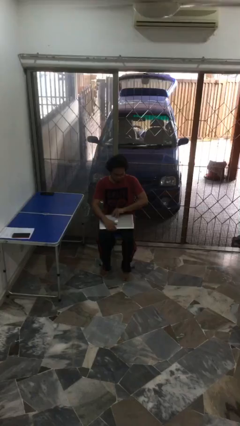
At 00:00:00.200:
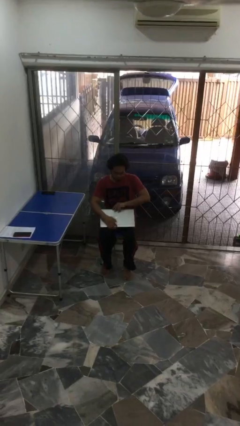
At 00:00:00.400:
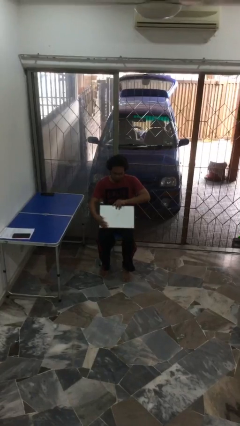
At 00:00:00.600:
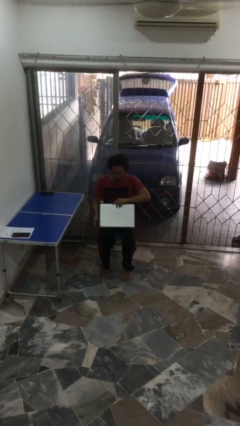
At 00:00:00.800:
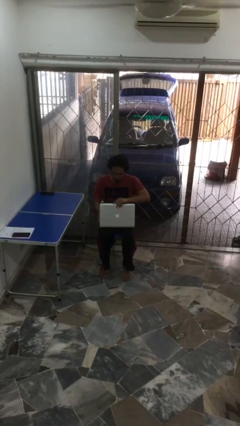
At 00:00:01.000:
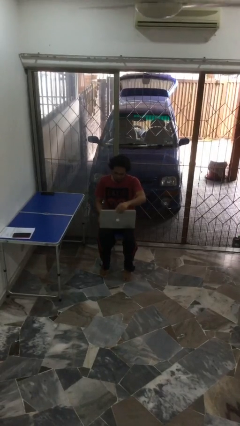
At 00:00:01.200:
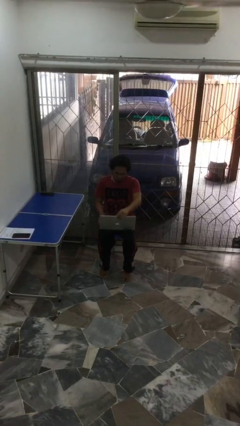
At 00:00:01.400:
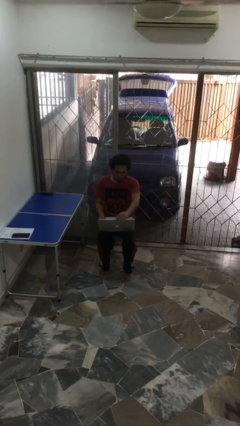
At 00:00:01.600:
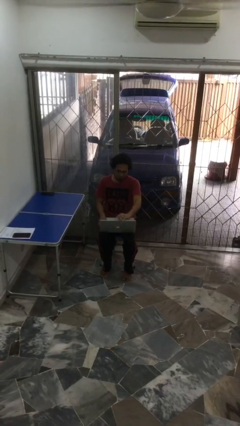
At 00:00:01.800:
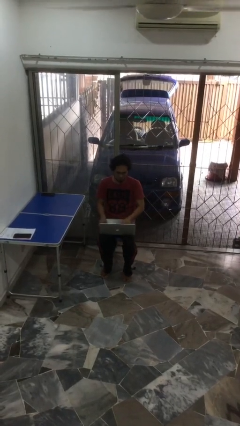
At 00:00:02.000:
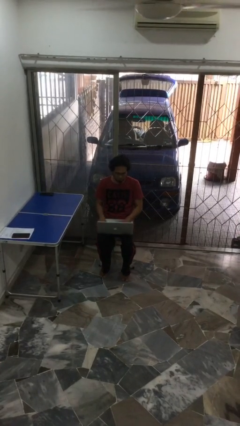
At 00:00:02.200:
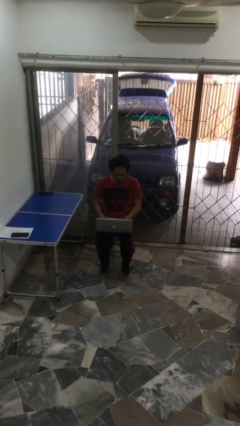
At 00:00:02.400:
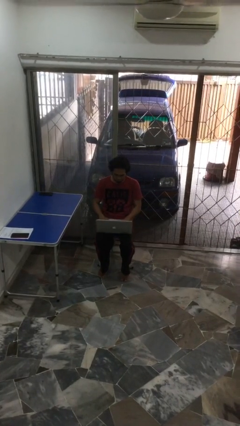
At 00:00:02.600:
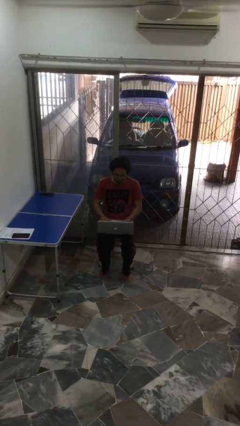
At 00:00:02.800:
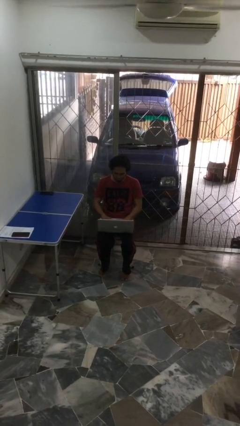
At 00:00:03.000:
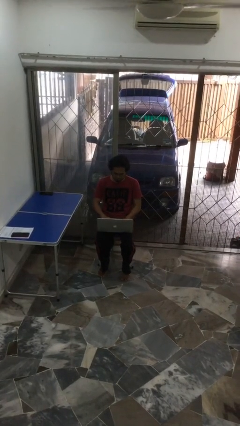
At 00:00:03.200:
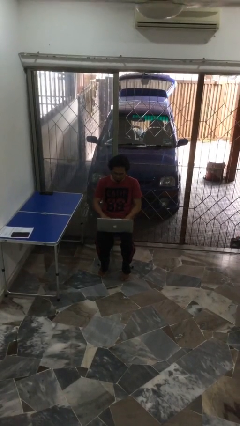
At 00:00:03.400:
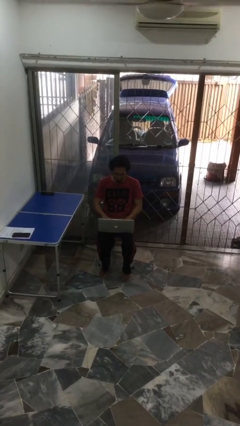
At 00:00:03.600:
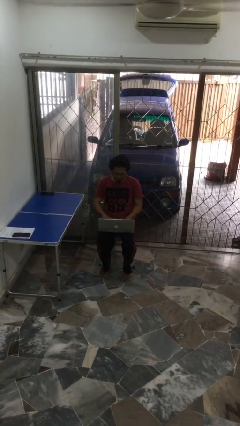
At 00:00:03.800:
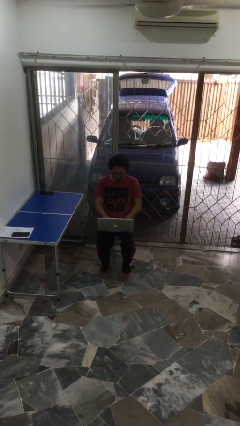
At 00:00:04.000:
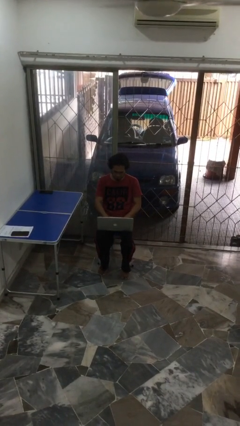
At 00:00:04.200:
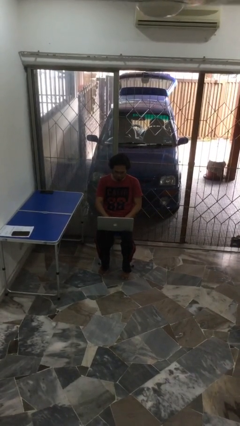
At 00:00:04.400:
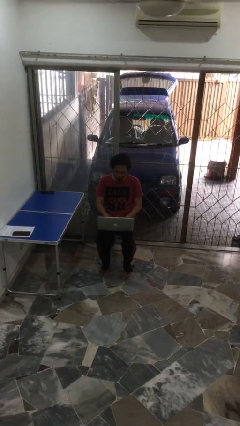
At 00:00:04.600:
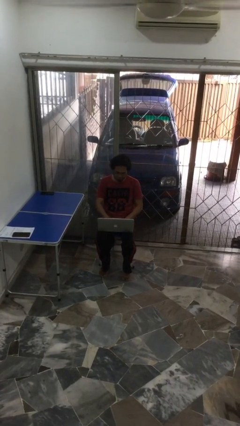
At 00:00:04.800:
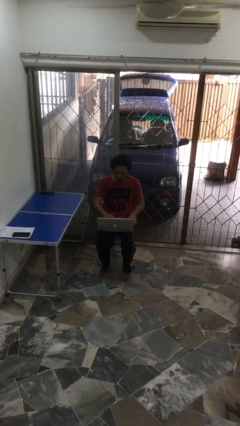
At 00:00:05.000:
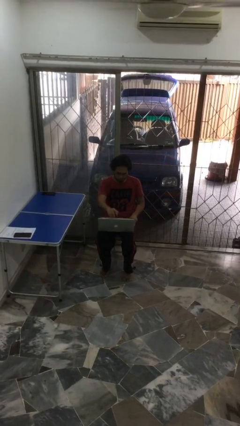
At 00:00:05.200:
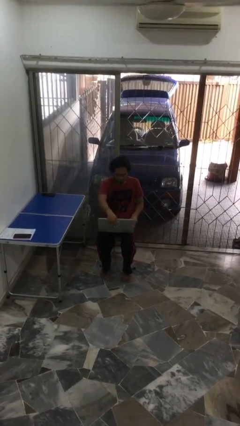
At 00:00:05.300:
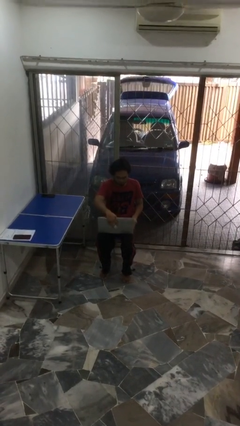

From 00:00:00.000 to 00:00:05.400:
person interacts with laptop

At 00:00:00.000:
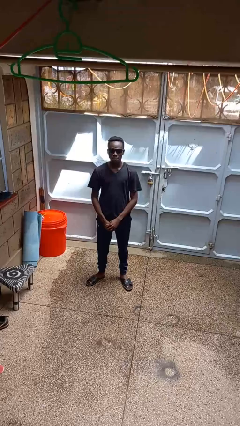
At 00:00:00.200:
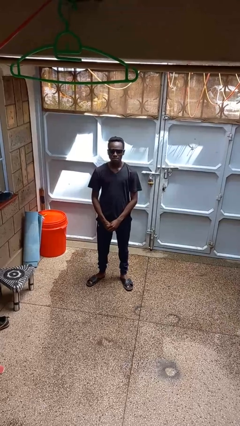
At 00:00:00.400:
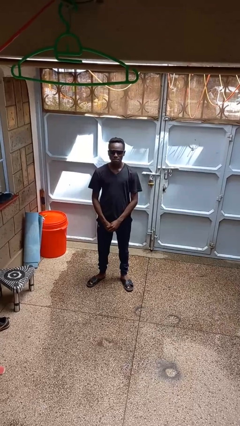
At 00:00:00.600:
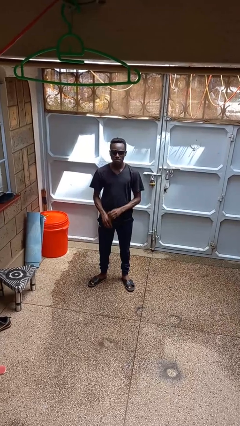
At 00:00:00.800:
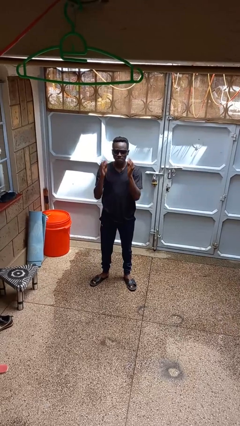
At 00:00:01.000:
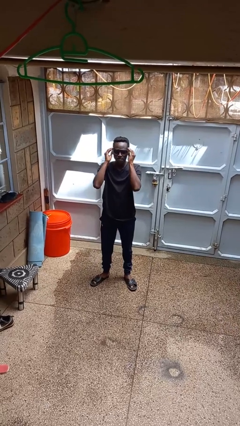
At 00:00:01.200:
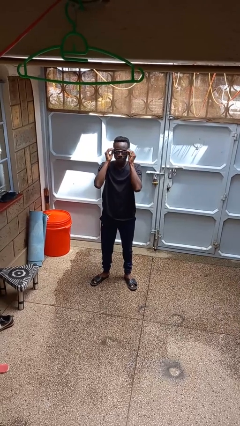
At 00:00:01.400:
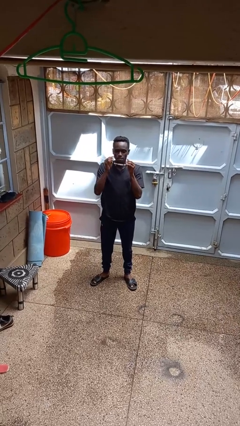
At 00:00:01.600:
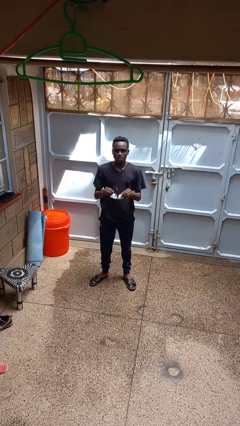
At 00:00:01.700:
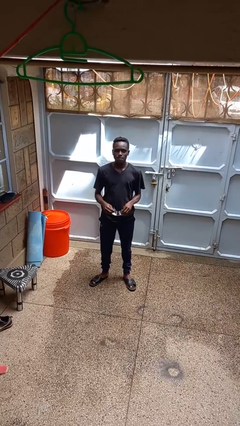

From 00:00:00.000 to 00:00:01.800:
person takes off sunglasses

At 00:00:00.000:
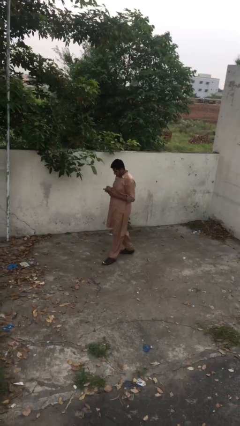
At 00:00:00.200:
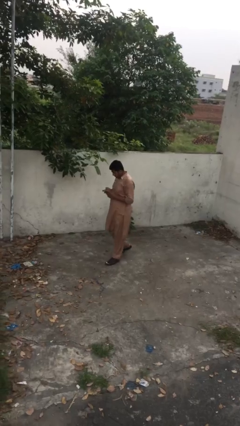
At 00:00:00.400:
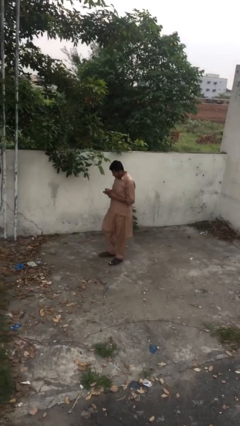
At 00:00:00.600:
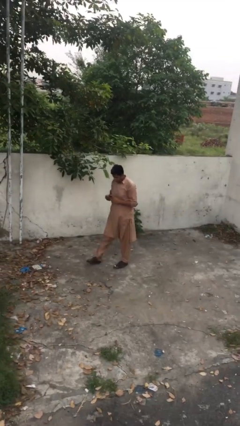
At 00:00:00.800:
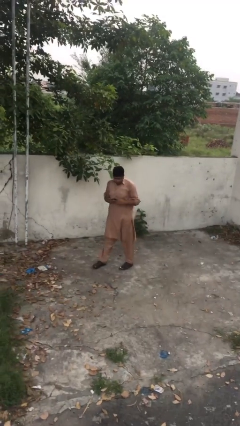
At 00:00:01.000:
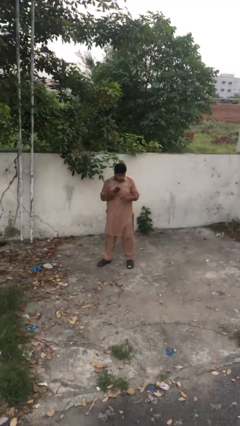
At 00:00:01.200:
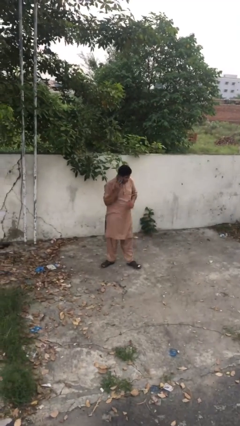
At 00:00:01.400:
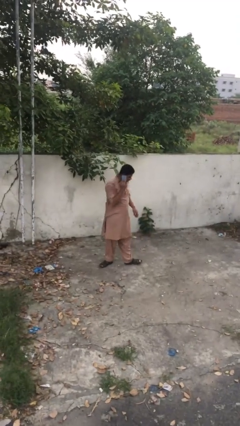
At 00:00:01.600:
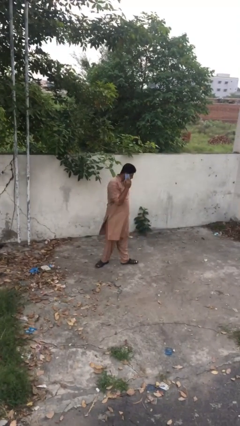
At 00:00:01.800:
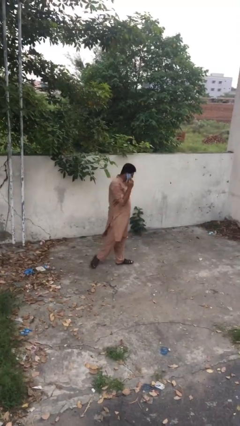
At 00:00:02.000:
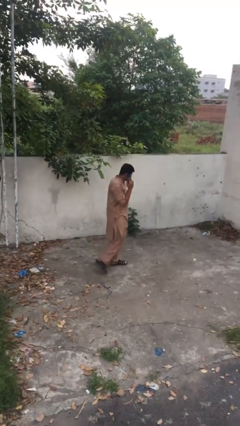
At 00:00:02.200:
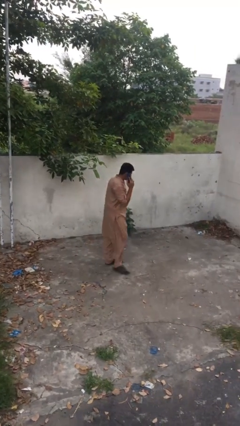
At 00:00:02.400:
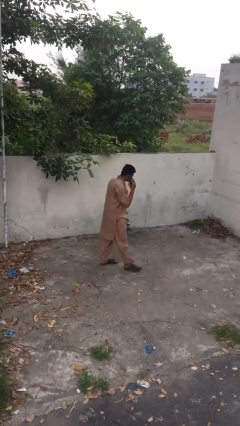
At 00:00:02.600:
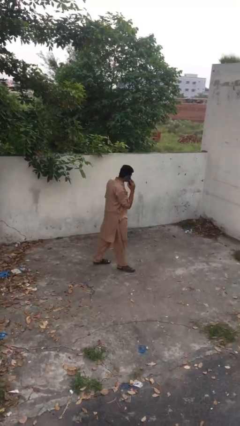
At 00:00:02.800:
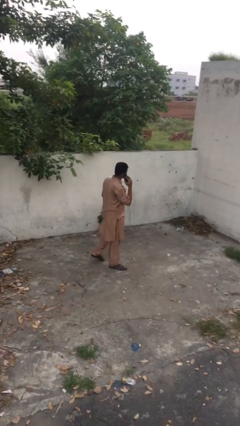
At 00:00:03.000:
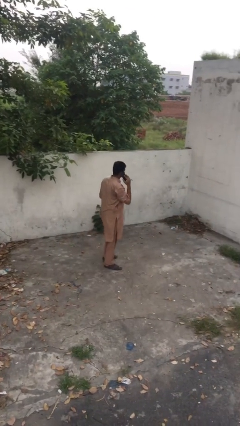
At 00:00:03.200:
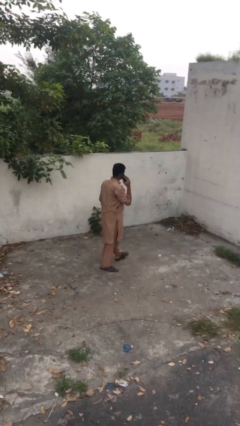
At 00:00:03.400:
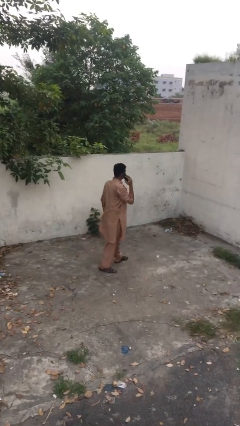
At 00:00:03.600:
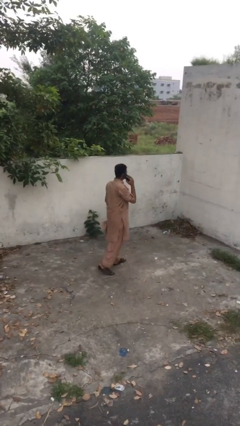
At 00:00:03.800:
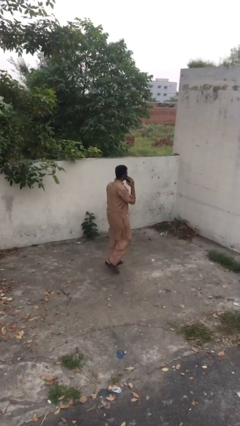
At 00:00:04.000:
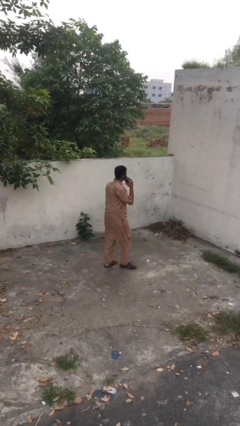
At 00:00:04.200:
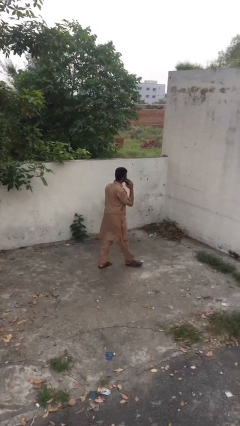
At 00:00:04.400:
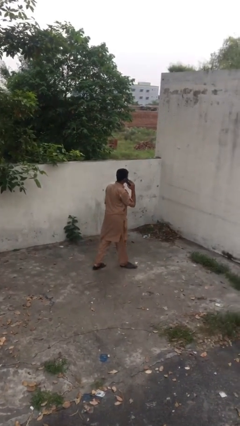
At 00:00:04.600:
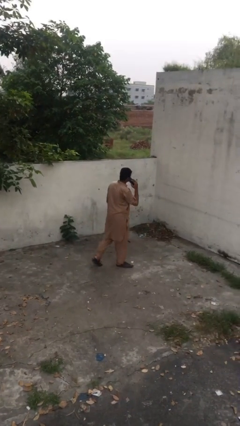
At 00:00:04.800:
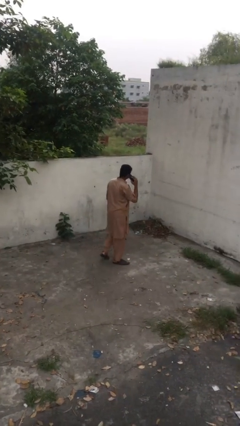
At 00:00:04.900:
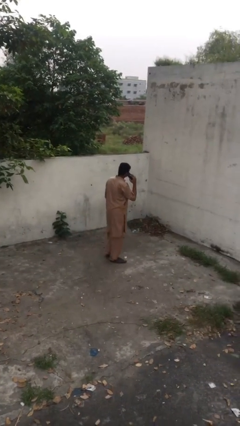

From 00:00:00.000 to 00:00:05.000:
person talks on phone

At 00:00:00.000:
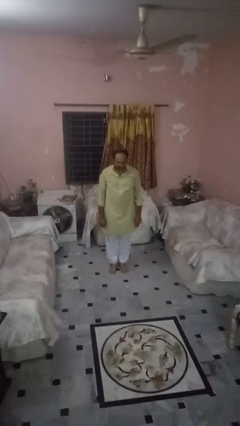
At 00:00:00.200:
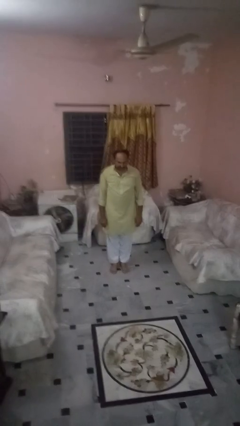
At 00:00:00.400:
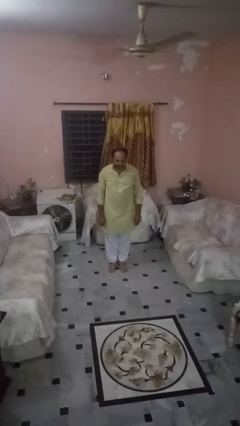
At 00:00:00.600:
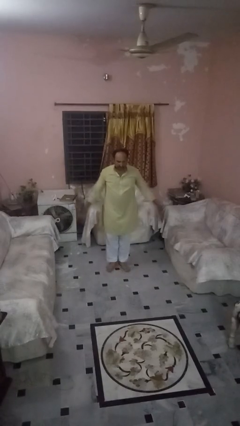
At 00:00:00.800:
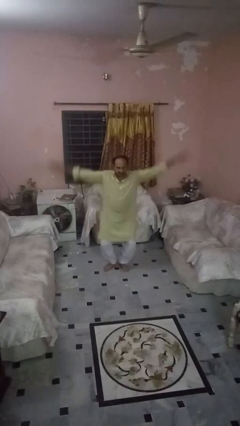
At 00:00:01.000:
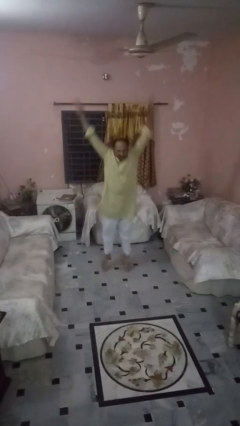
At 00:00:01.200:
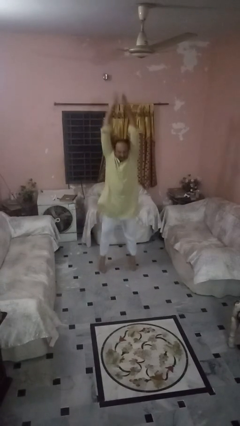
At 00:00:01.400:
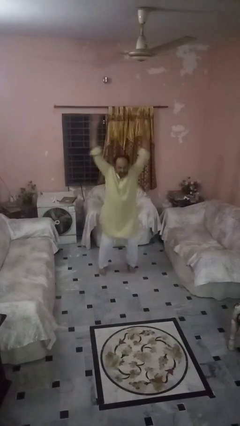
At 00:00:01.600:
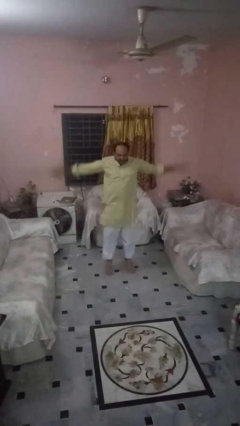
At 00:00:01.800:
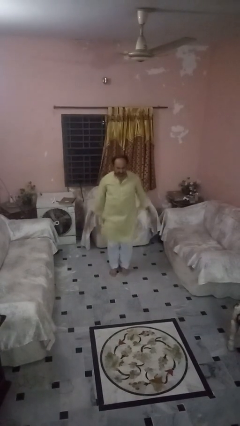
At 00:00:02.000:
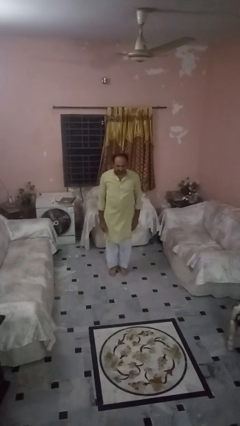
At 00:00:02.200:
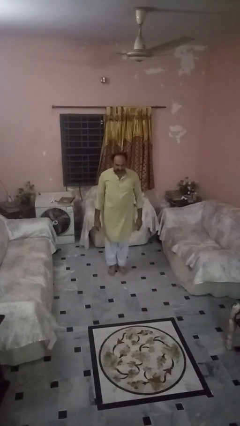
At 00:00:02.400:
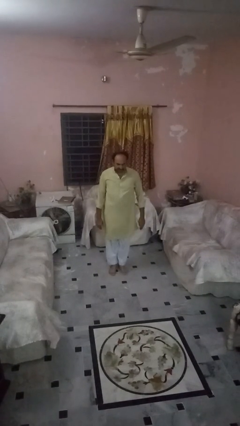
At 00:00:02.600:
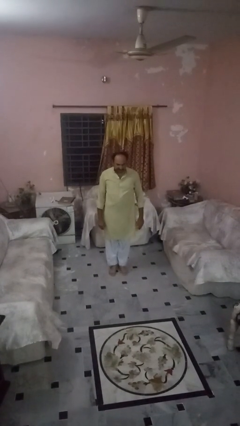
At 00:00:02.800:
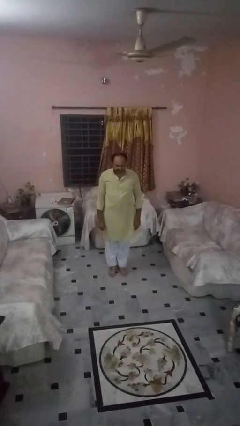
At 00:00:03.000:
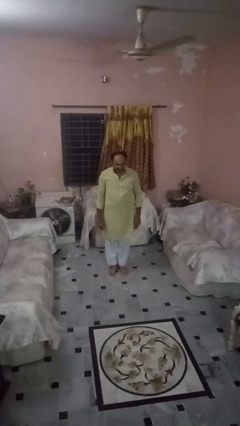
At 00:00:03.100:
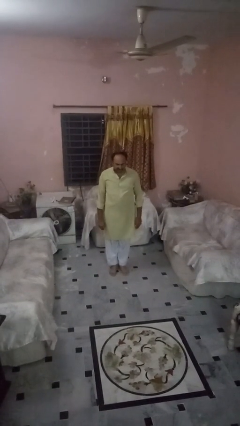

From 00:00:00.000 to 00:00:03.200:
person exercises with jumping jacks

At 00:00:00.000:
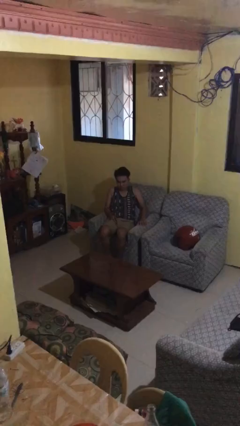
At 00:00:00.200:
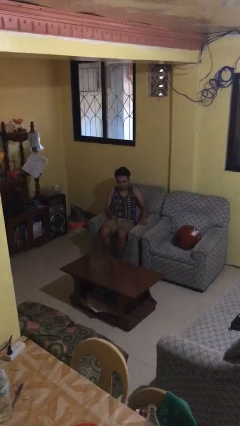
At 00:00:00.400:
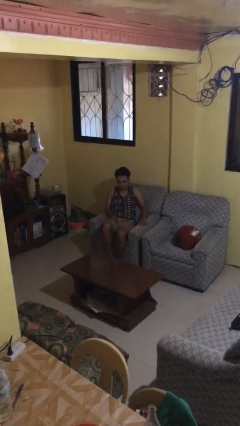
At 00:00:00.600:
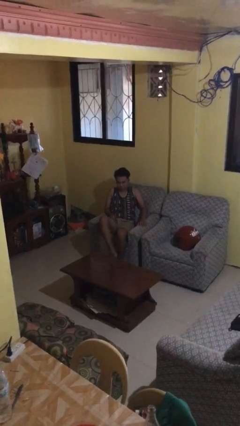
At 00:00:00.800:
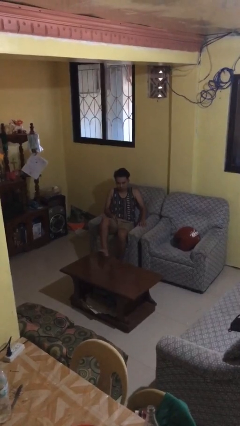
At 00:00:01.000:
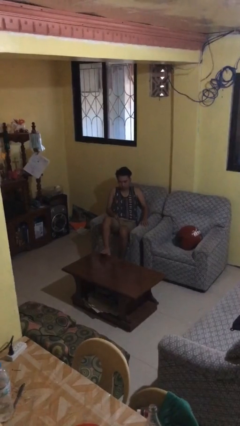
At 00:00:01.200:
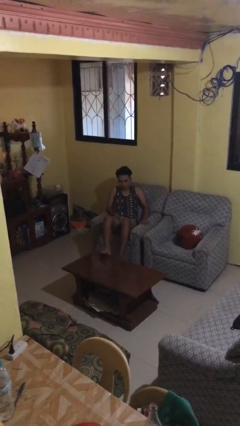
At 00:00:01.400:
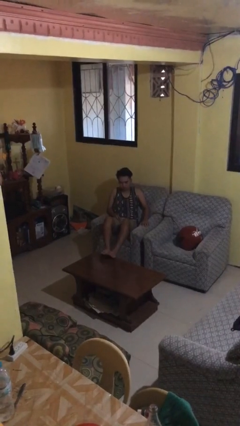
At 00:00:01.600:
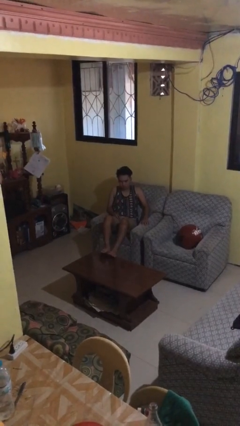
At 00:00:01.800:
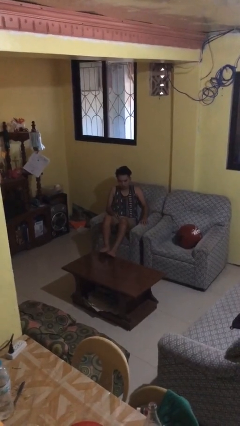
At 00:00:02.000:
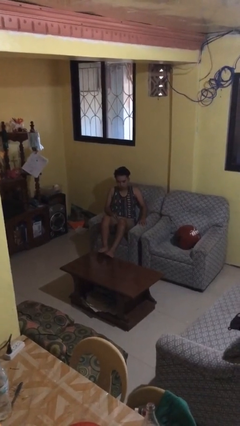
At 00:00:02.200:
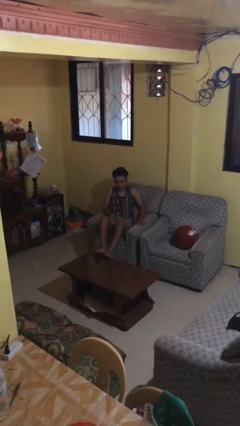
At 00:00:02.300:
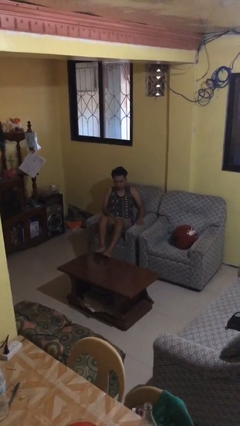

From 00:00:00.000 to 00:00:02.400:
person puts feet up
